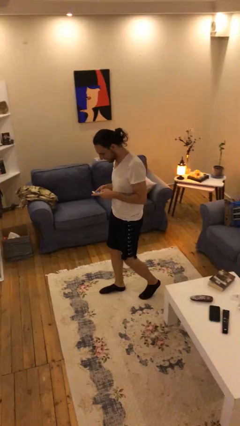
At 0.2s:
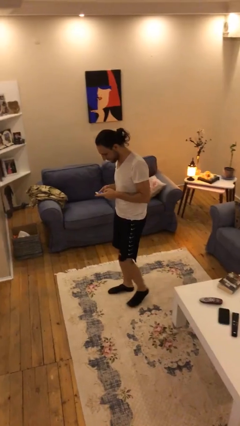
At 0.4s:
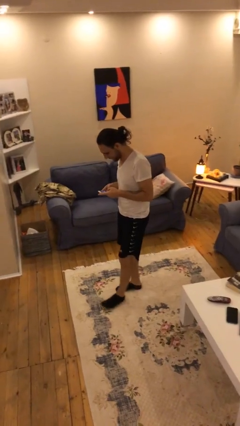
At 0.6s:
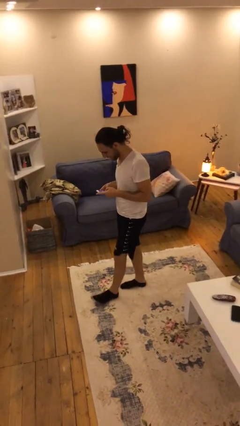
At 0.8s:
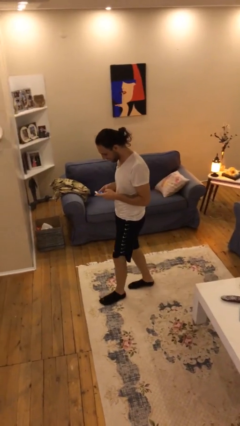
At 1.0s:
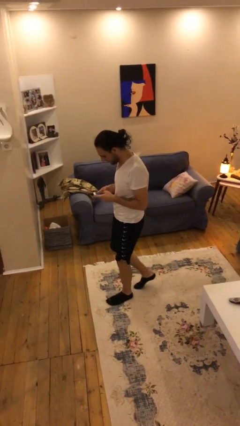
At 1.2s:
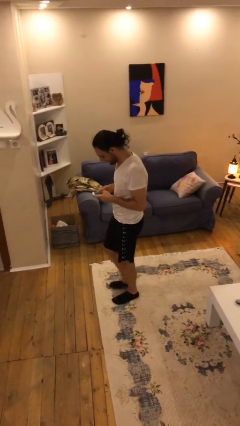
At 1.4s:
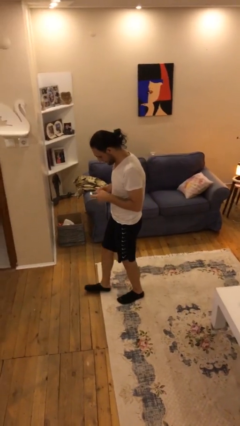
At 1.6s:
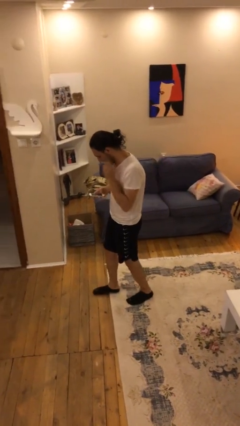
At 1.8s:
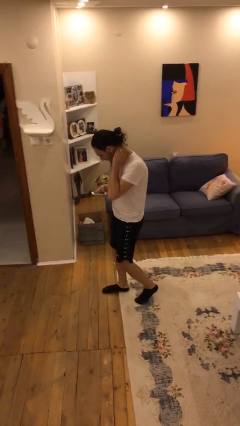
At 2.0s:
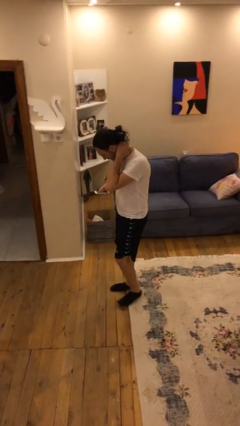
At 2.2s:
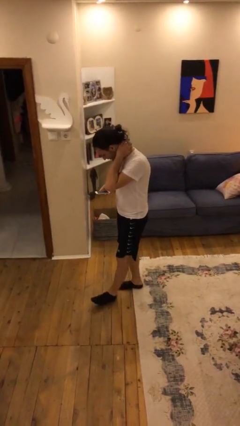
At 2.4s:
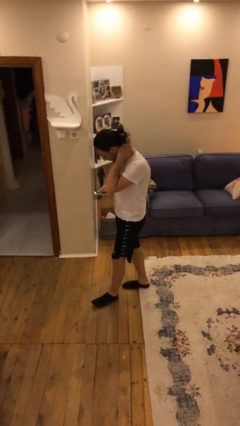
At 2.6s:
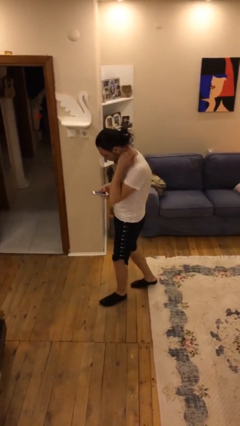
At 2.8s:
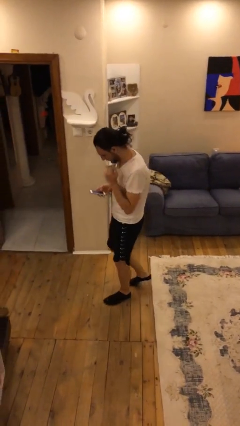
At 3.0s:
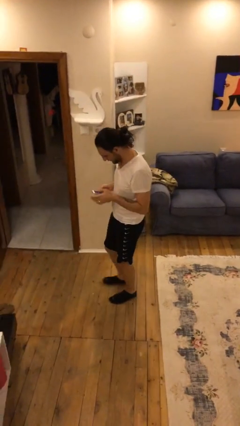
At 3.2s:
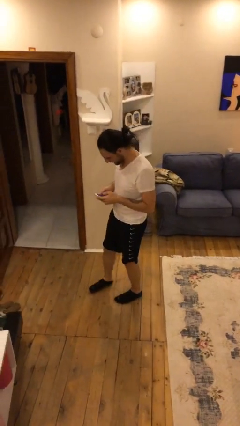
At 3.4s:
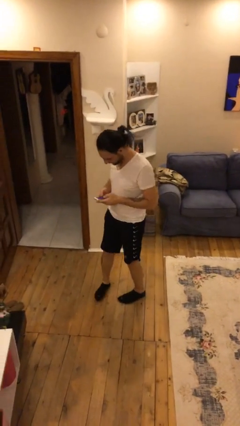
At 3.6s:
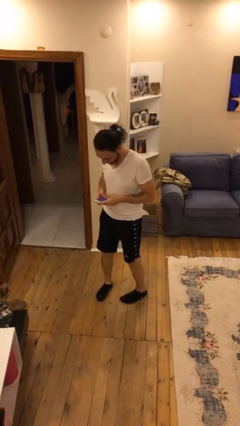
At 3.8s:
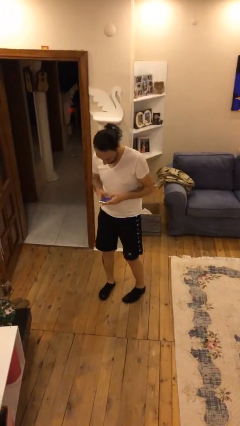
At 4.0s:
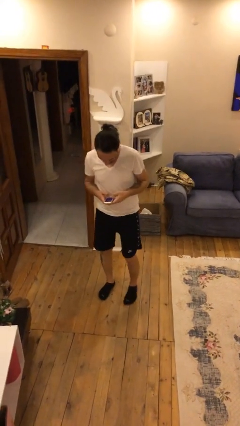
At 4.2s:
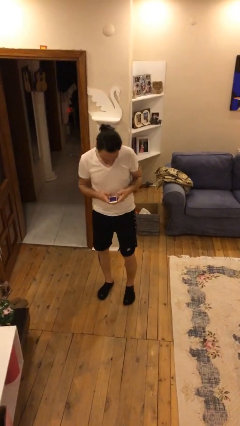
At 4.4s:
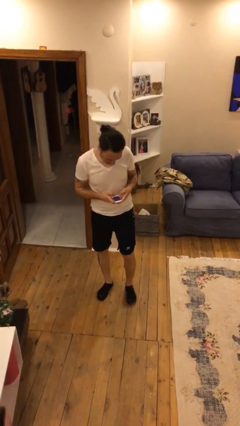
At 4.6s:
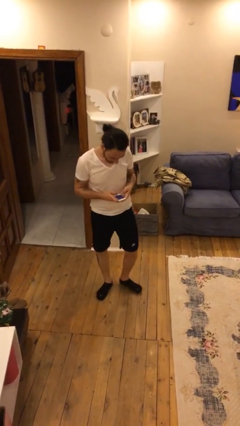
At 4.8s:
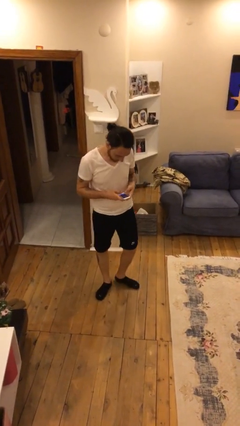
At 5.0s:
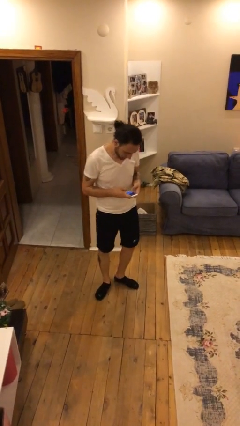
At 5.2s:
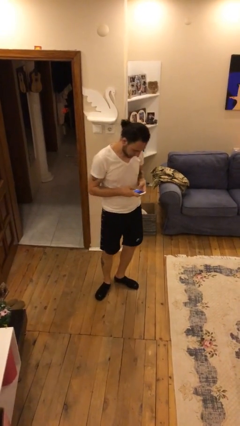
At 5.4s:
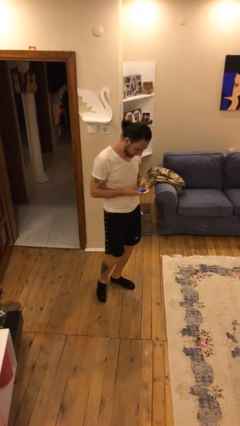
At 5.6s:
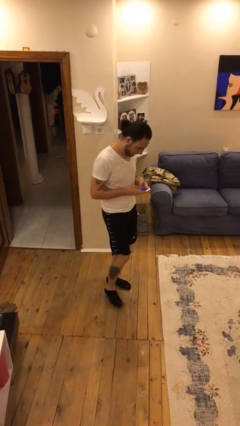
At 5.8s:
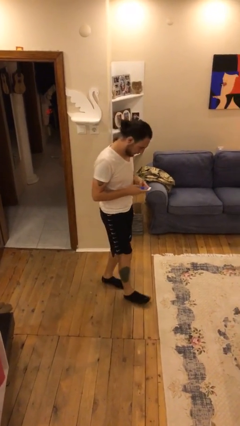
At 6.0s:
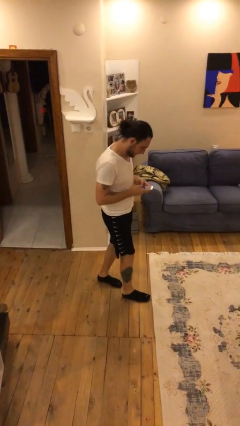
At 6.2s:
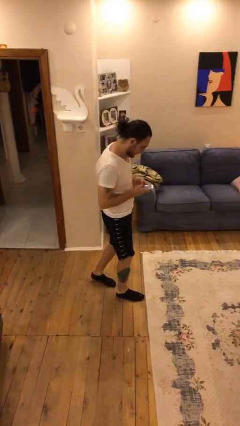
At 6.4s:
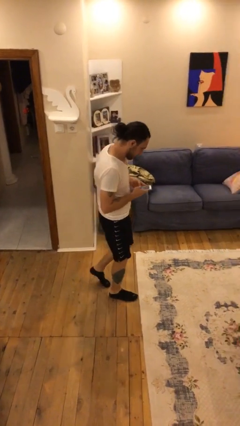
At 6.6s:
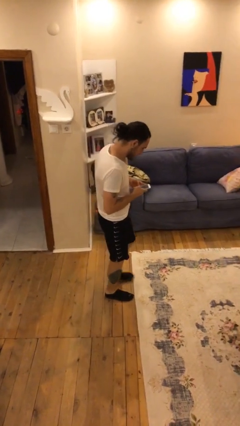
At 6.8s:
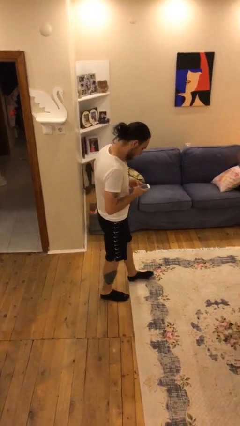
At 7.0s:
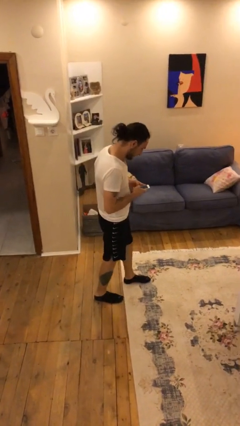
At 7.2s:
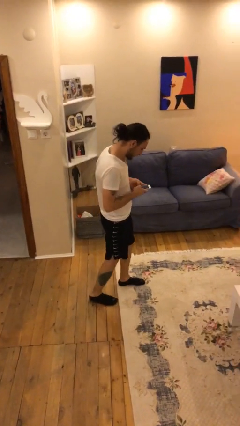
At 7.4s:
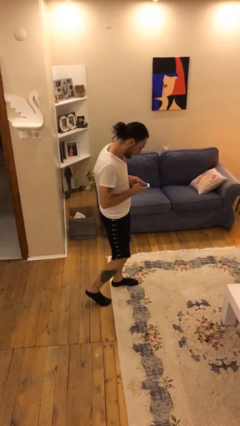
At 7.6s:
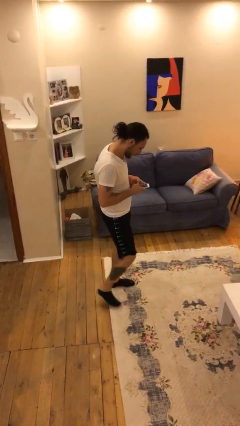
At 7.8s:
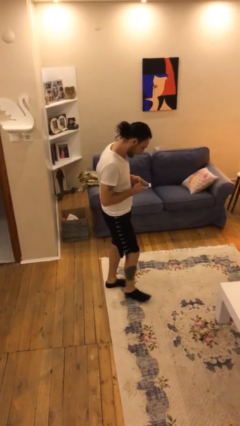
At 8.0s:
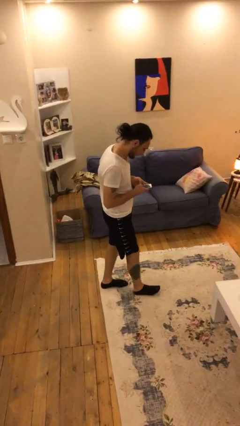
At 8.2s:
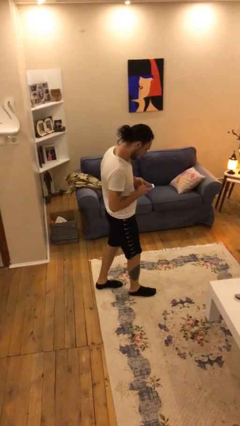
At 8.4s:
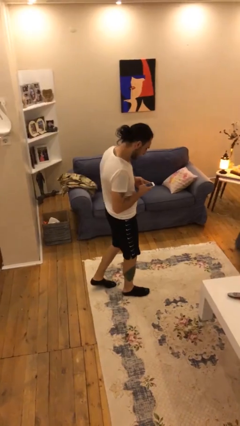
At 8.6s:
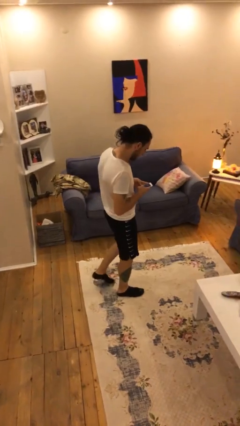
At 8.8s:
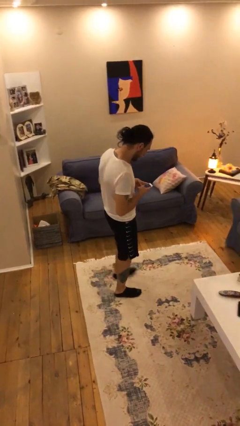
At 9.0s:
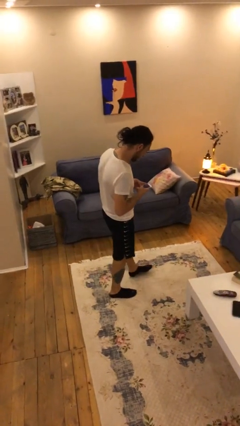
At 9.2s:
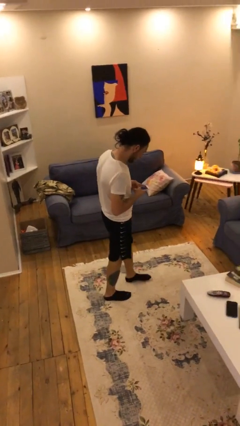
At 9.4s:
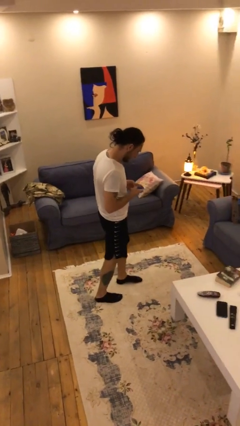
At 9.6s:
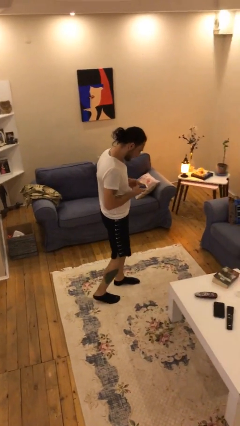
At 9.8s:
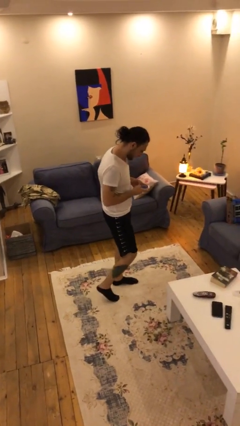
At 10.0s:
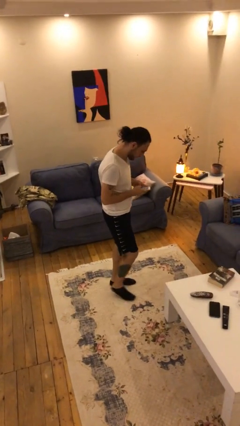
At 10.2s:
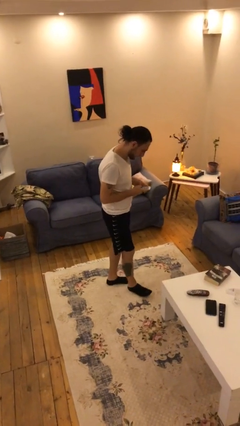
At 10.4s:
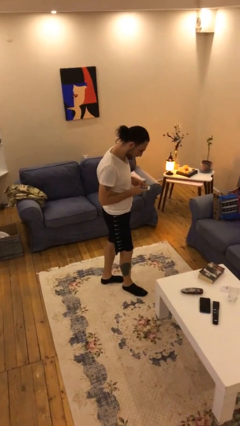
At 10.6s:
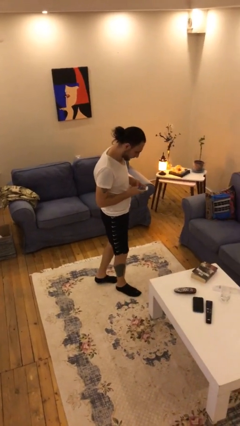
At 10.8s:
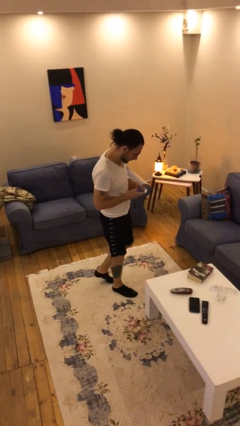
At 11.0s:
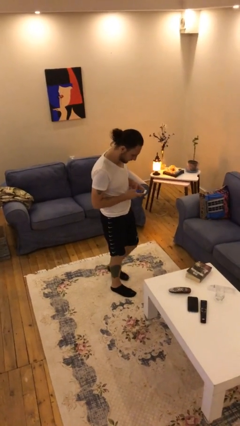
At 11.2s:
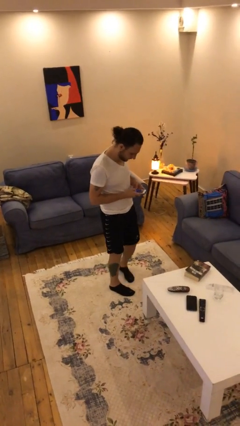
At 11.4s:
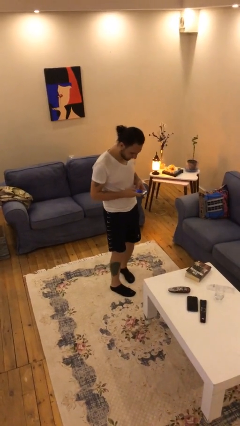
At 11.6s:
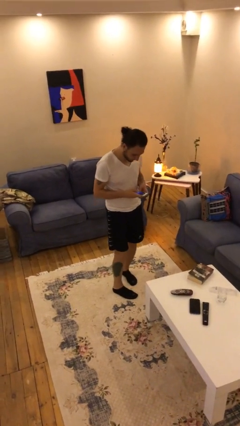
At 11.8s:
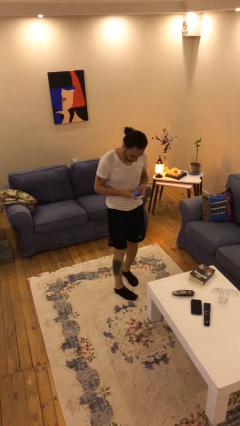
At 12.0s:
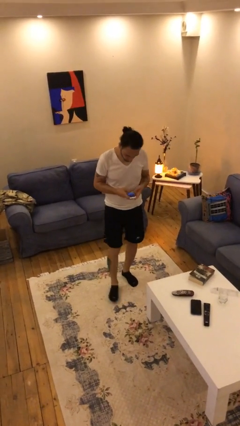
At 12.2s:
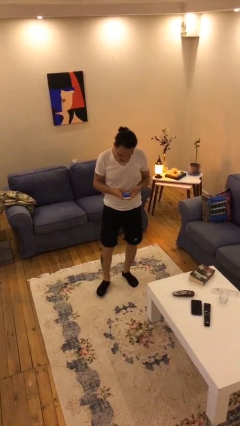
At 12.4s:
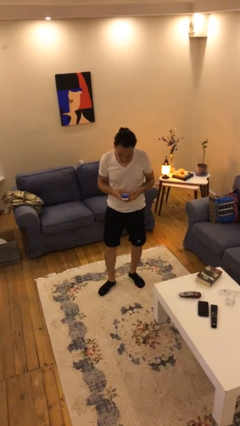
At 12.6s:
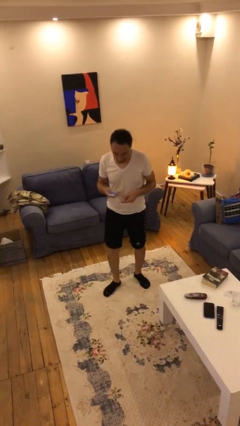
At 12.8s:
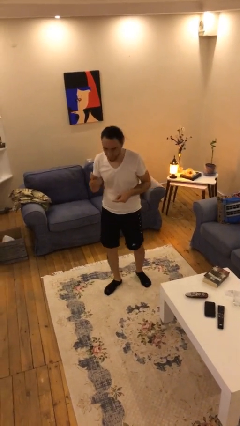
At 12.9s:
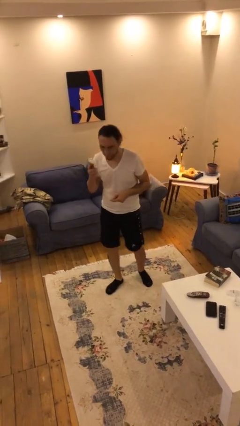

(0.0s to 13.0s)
person texts on phone

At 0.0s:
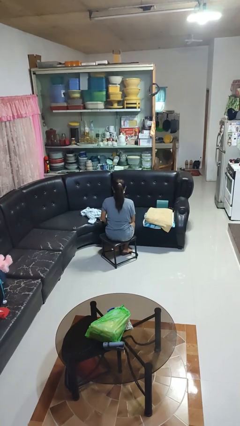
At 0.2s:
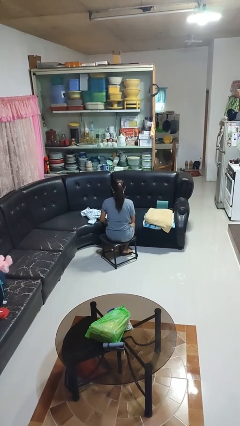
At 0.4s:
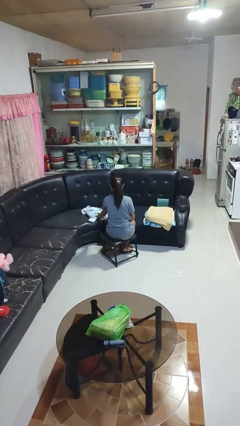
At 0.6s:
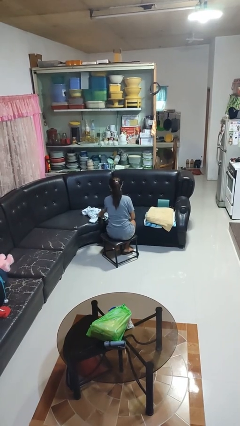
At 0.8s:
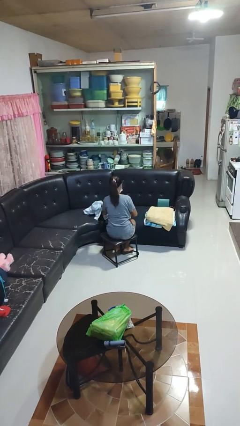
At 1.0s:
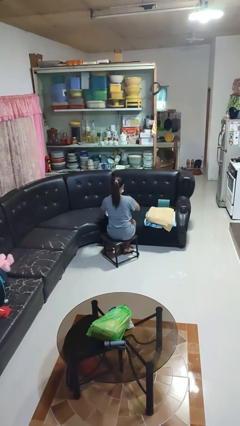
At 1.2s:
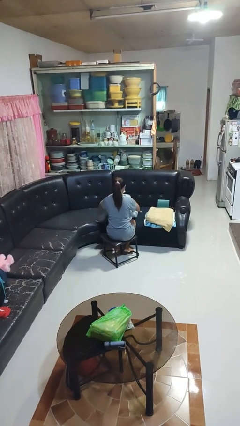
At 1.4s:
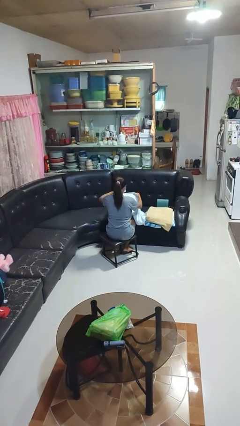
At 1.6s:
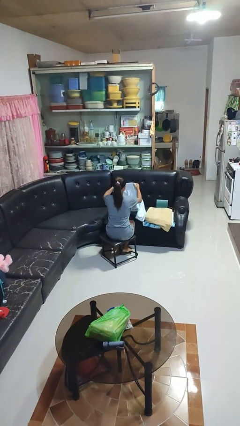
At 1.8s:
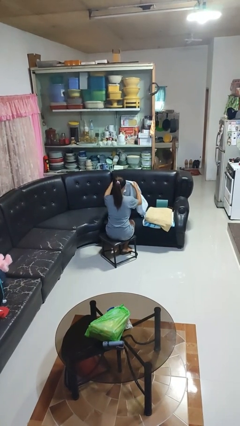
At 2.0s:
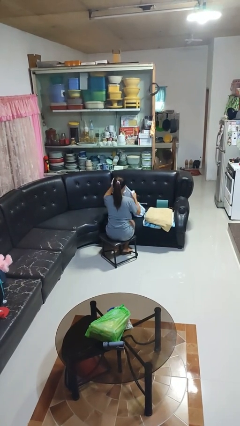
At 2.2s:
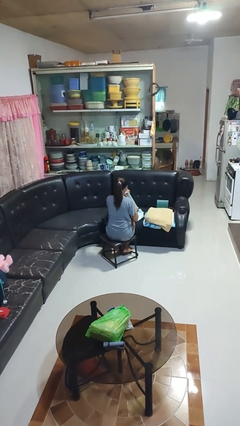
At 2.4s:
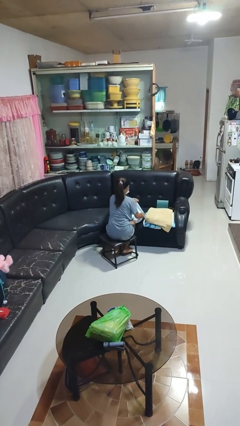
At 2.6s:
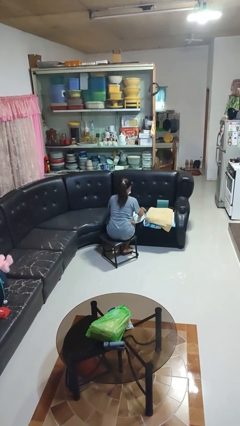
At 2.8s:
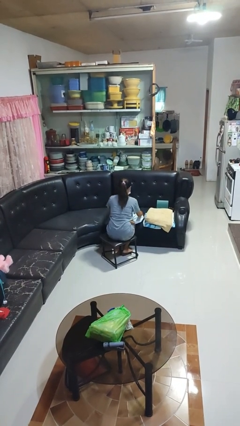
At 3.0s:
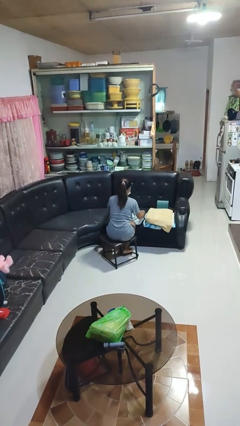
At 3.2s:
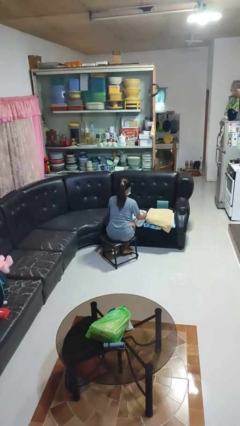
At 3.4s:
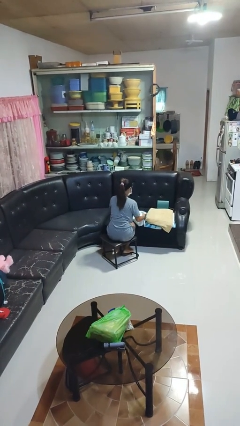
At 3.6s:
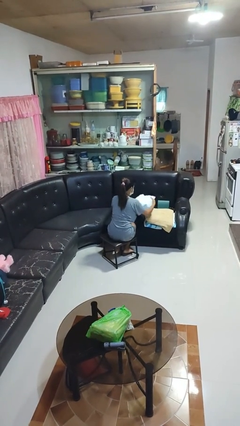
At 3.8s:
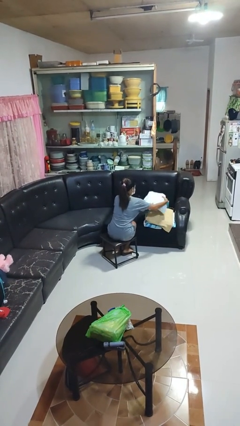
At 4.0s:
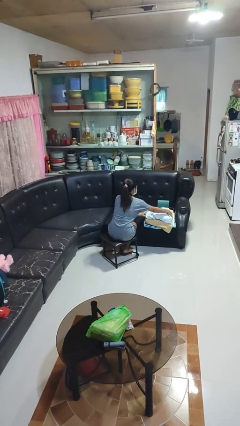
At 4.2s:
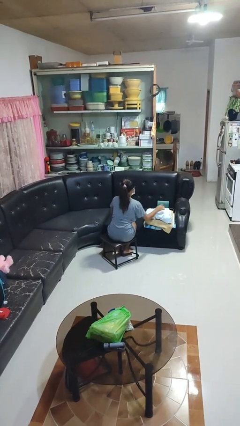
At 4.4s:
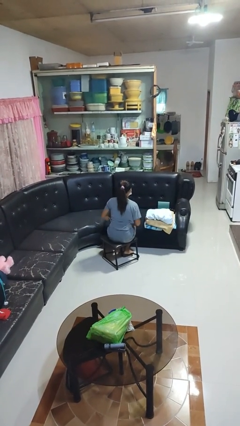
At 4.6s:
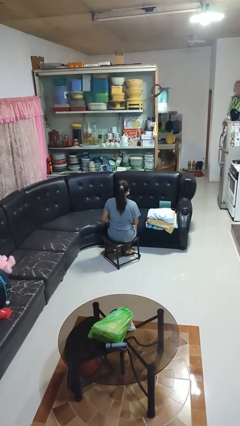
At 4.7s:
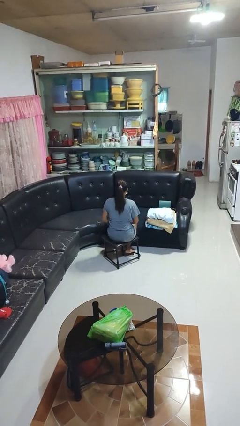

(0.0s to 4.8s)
person folds towel

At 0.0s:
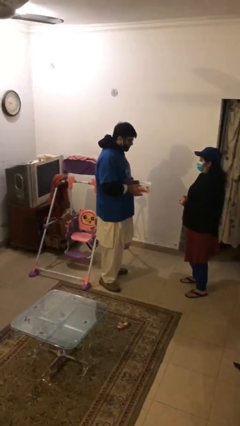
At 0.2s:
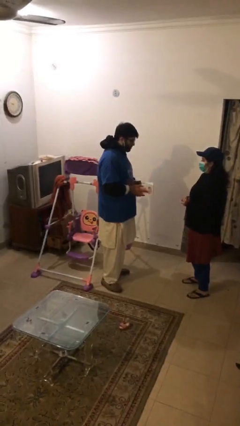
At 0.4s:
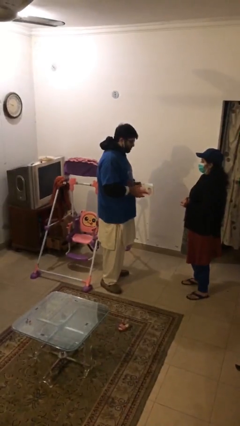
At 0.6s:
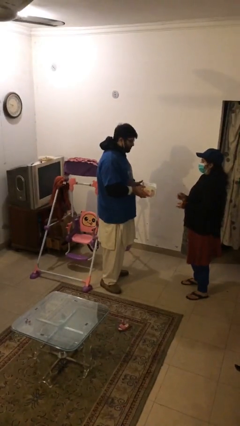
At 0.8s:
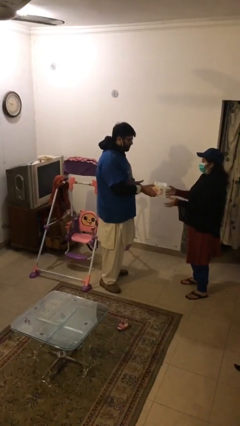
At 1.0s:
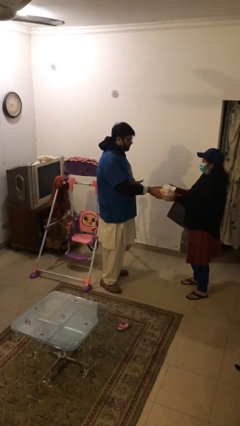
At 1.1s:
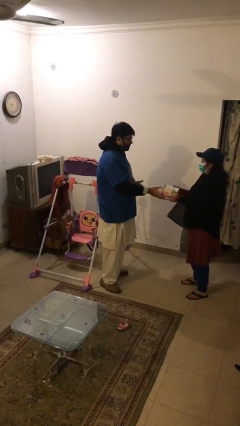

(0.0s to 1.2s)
person transfers object to person
